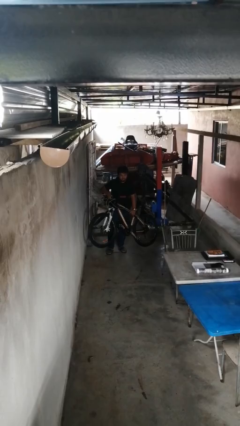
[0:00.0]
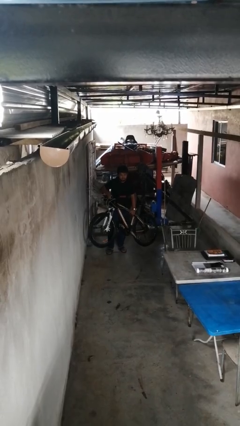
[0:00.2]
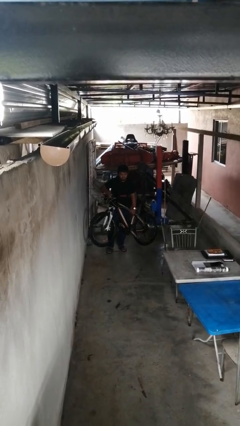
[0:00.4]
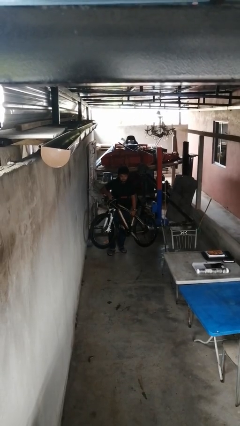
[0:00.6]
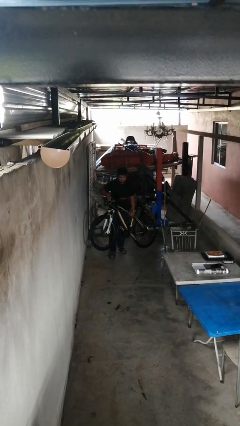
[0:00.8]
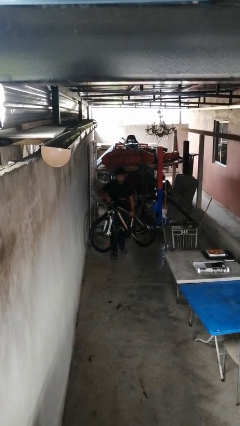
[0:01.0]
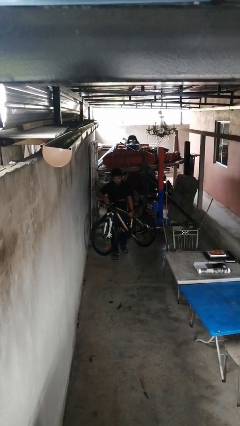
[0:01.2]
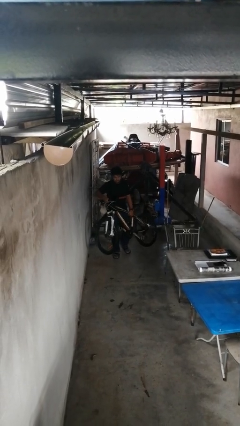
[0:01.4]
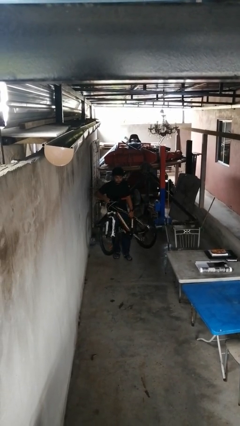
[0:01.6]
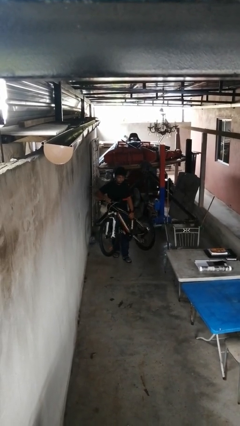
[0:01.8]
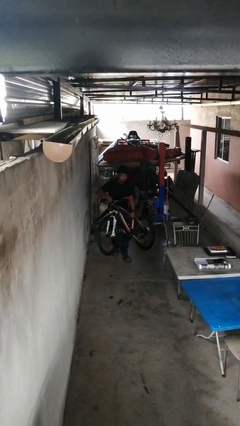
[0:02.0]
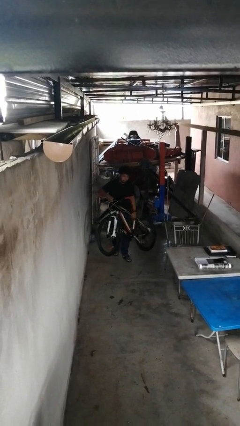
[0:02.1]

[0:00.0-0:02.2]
person carries bicycle

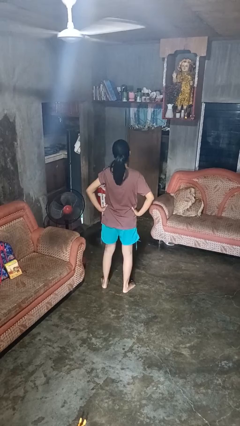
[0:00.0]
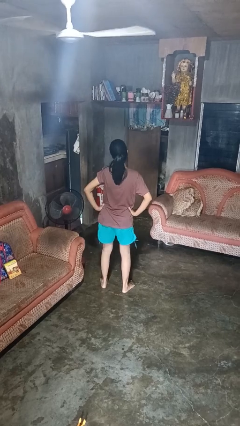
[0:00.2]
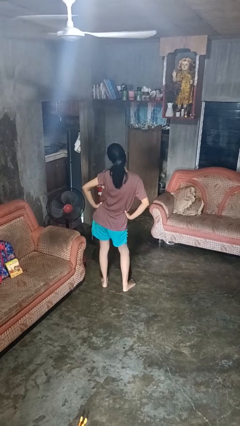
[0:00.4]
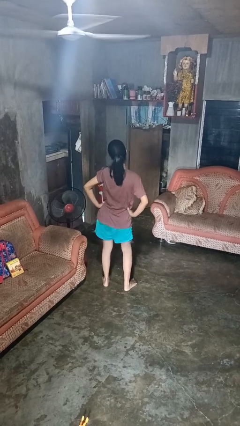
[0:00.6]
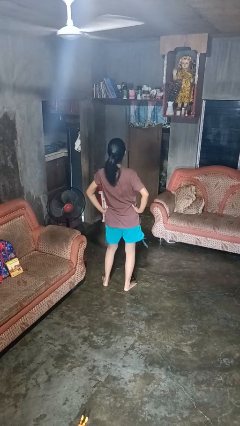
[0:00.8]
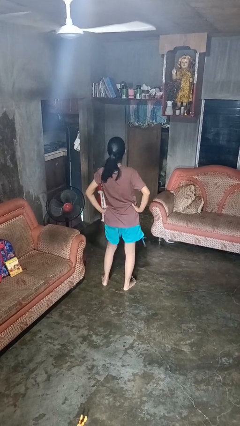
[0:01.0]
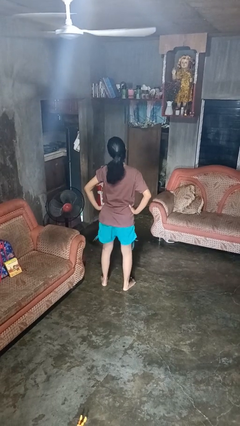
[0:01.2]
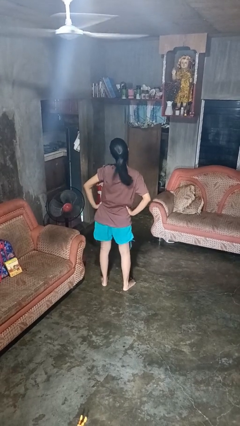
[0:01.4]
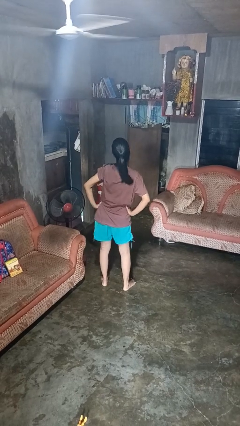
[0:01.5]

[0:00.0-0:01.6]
person dances in place

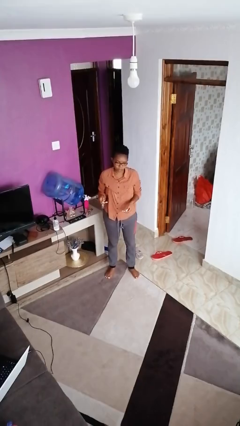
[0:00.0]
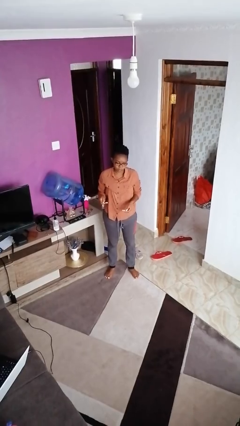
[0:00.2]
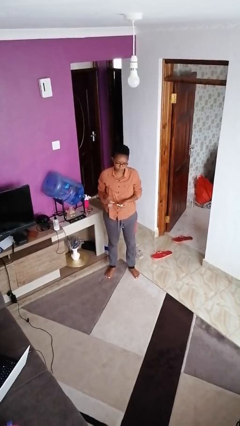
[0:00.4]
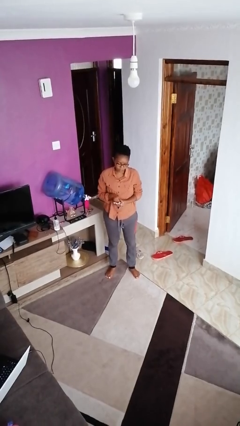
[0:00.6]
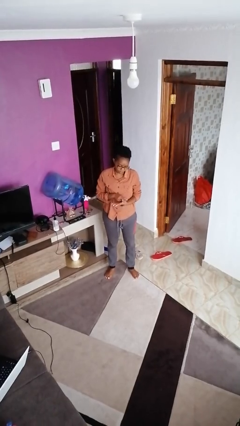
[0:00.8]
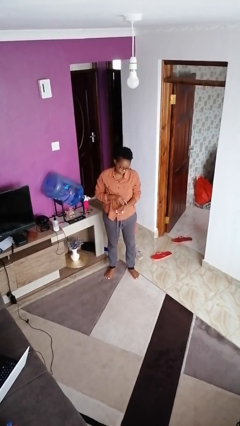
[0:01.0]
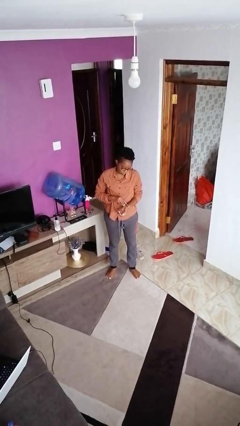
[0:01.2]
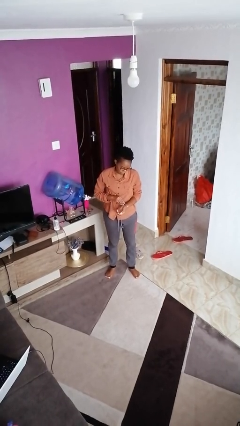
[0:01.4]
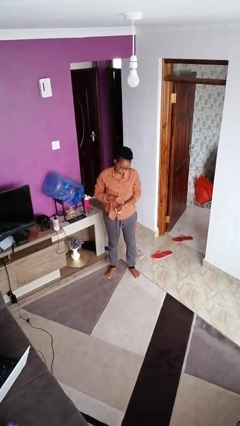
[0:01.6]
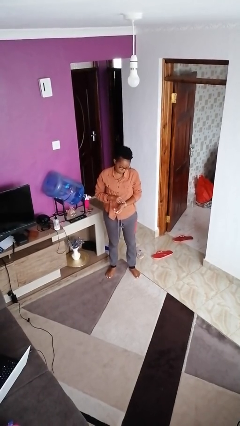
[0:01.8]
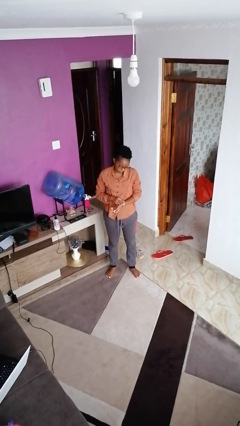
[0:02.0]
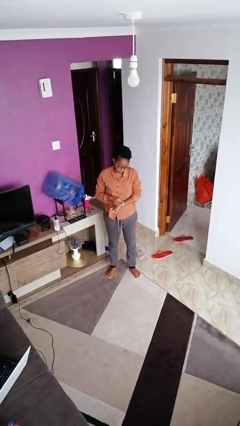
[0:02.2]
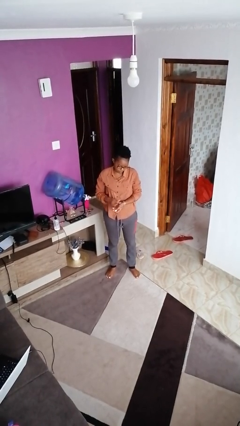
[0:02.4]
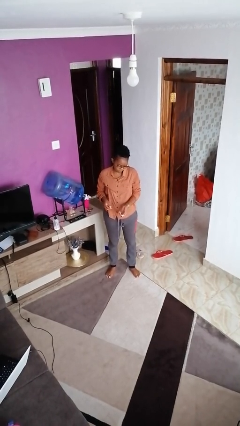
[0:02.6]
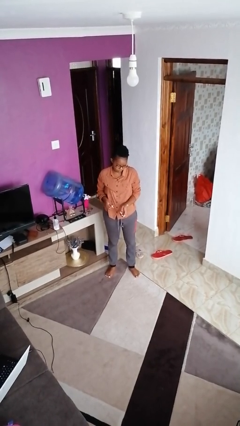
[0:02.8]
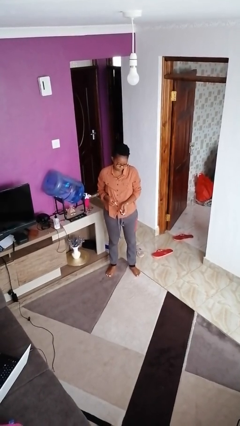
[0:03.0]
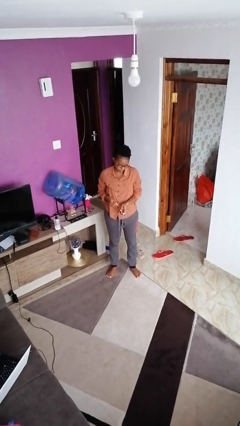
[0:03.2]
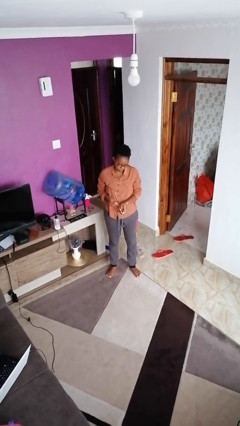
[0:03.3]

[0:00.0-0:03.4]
person puts on wristwatch

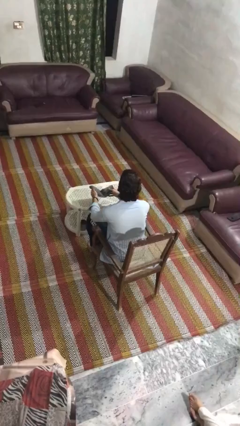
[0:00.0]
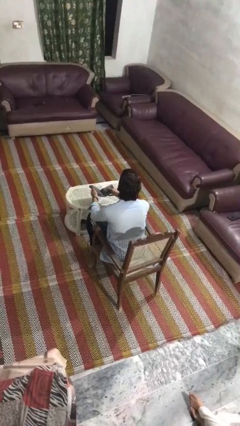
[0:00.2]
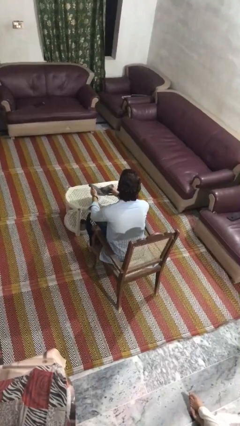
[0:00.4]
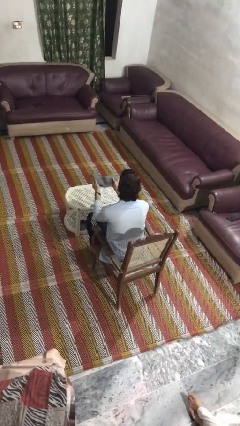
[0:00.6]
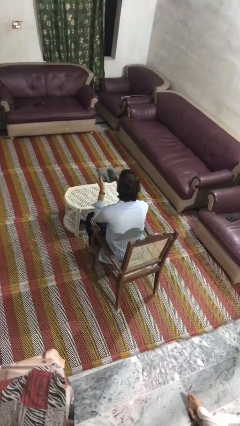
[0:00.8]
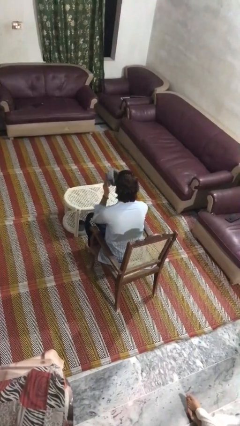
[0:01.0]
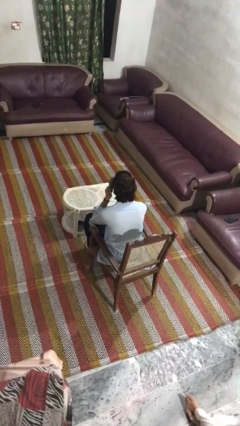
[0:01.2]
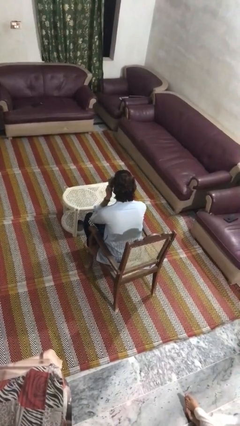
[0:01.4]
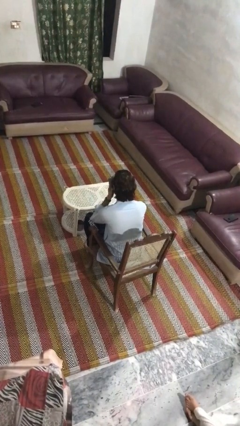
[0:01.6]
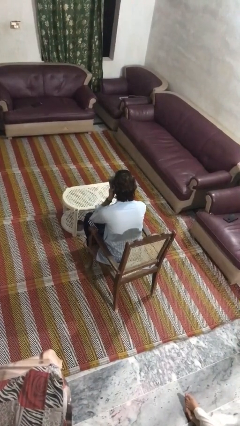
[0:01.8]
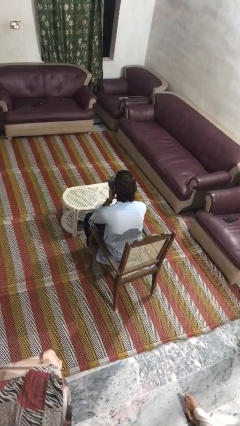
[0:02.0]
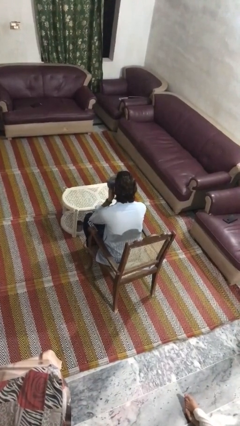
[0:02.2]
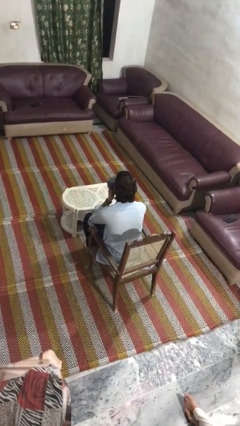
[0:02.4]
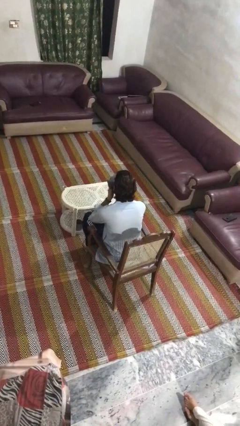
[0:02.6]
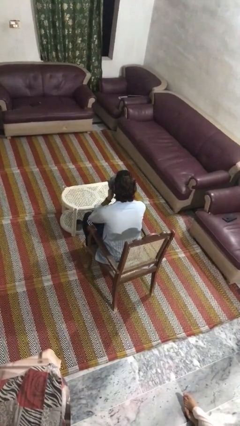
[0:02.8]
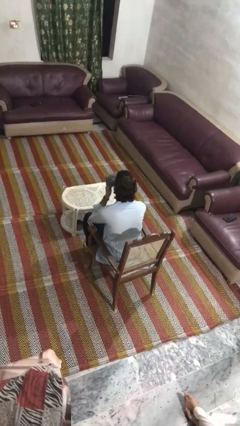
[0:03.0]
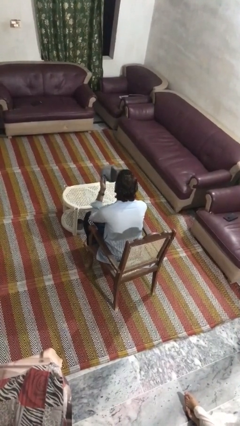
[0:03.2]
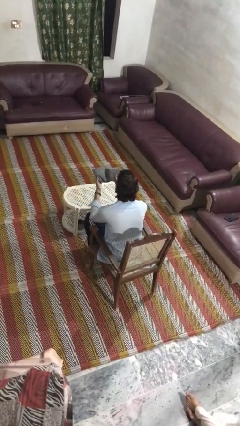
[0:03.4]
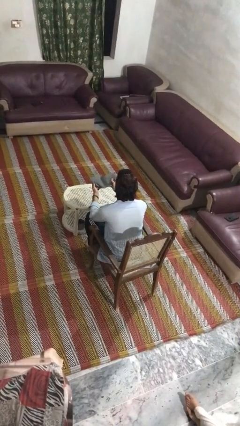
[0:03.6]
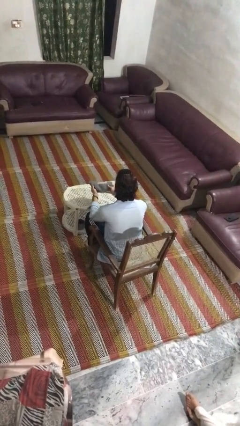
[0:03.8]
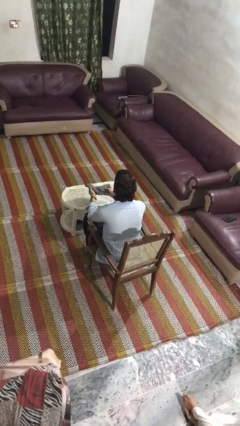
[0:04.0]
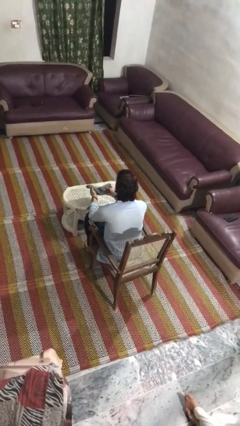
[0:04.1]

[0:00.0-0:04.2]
person wipes mouth with napkin

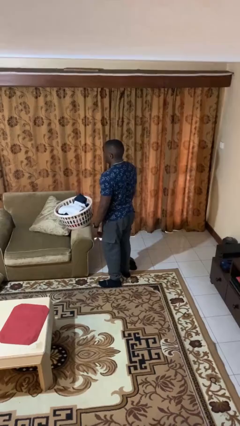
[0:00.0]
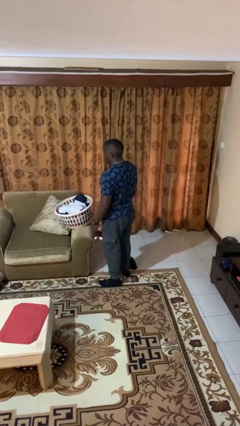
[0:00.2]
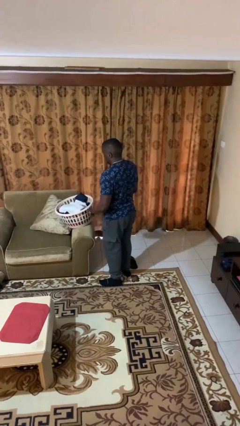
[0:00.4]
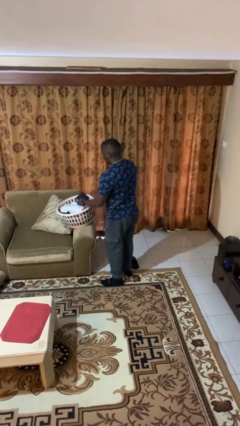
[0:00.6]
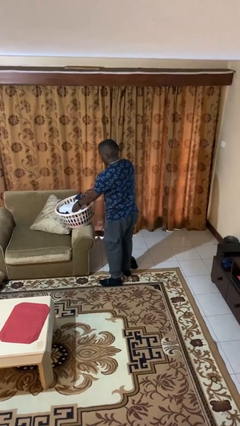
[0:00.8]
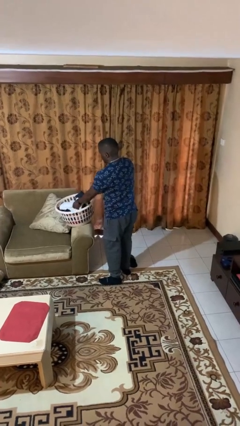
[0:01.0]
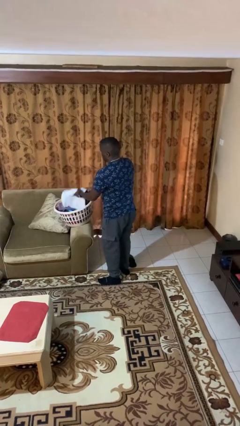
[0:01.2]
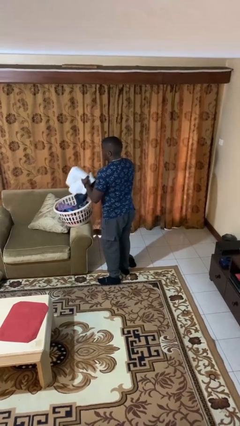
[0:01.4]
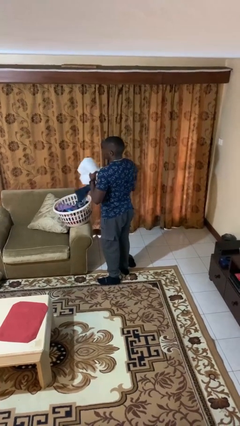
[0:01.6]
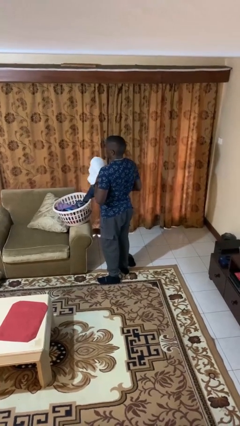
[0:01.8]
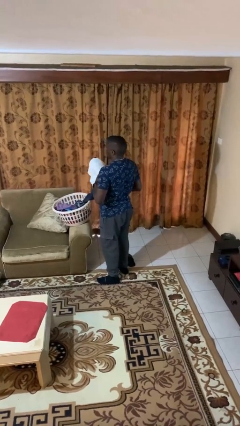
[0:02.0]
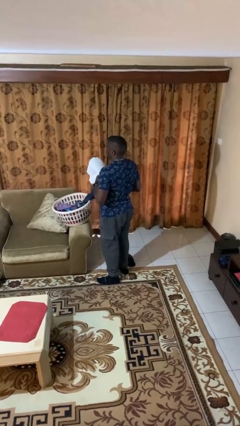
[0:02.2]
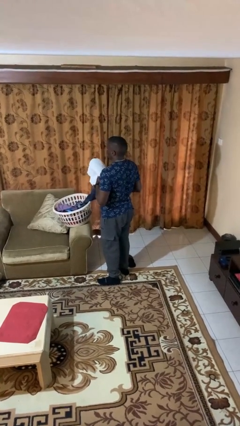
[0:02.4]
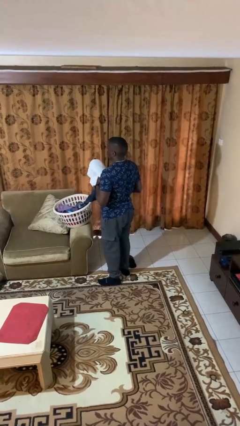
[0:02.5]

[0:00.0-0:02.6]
person takes object from basket

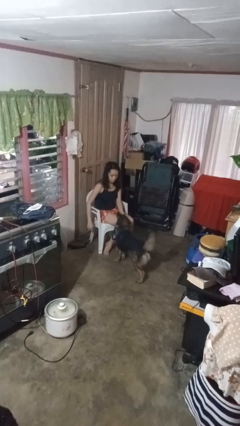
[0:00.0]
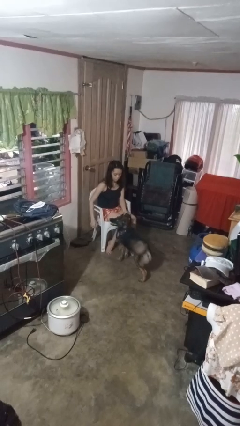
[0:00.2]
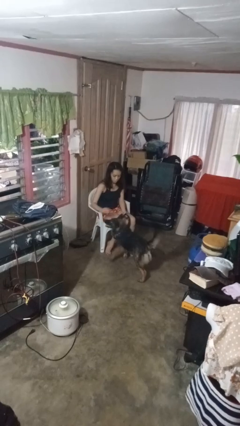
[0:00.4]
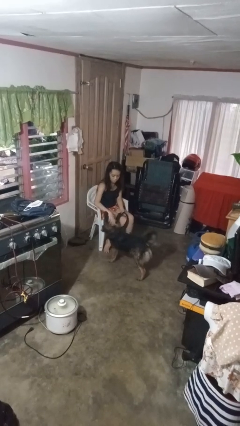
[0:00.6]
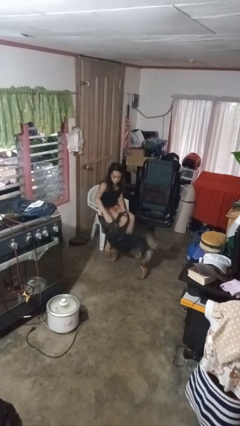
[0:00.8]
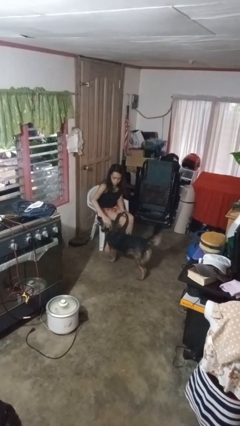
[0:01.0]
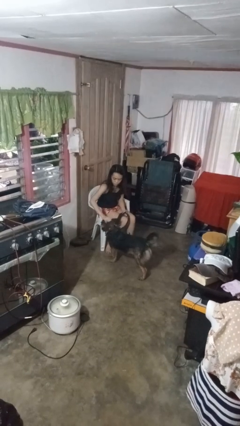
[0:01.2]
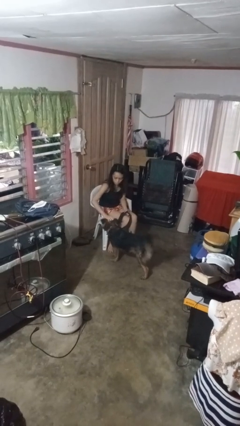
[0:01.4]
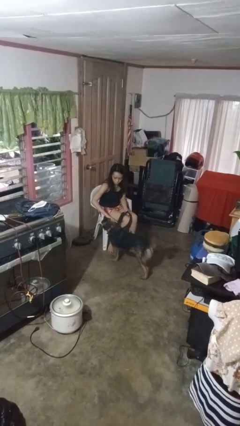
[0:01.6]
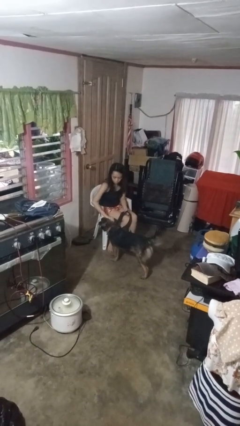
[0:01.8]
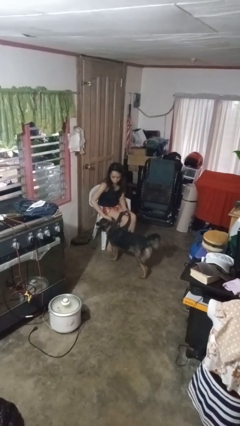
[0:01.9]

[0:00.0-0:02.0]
person pets dog

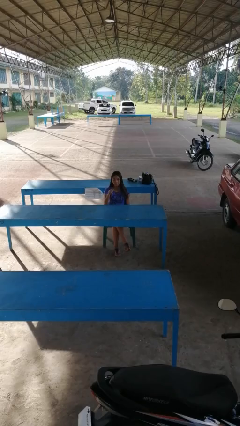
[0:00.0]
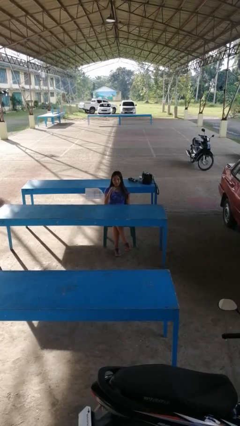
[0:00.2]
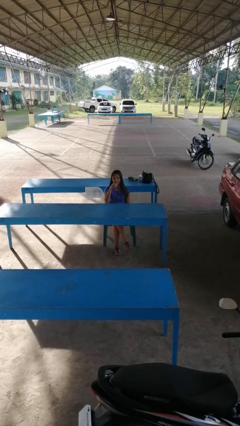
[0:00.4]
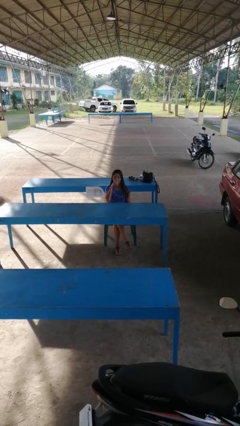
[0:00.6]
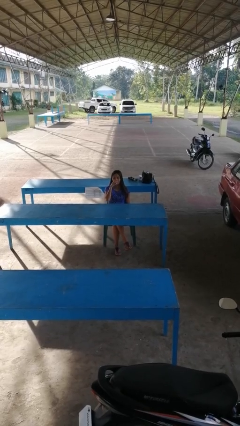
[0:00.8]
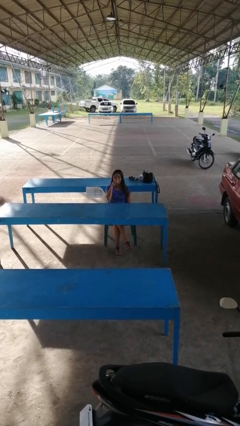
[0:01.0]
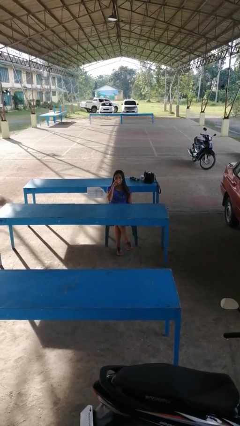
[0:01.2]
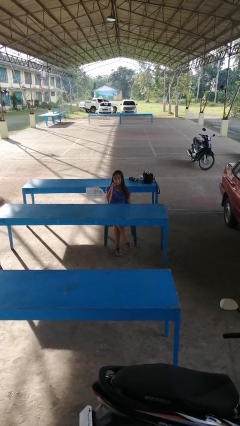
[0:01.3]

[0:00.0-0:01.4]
person drinks from shotglass
